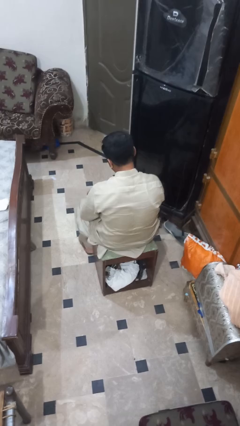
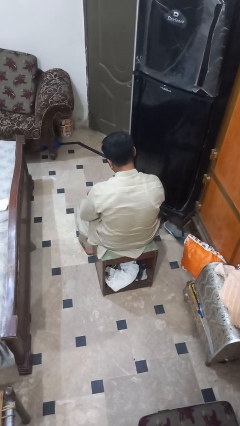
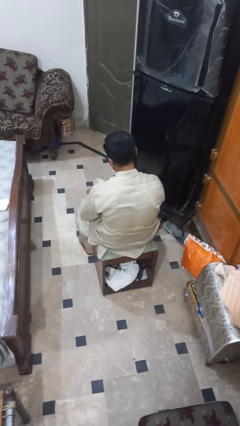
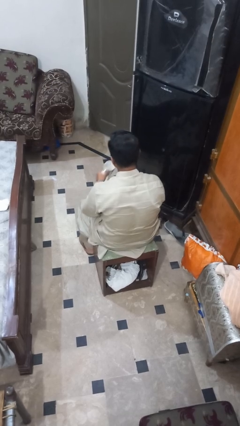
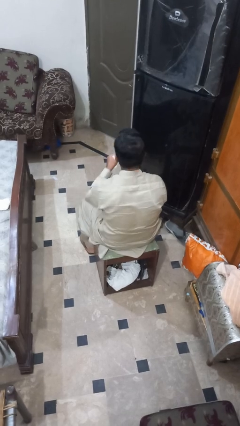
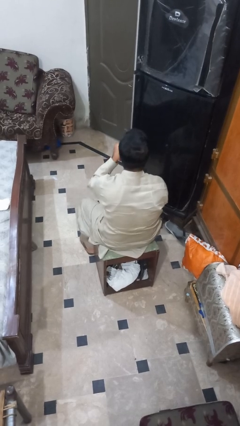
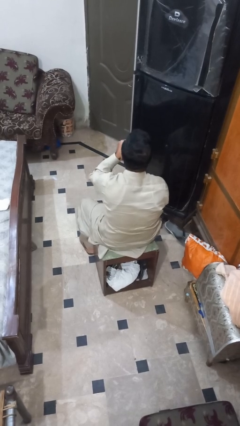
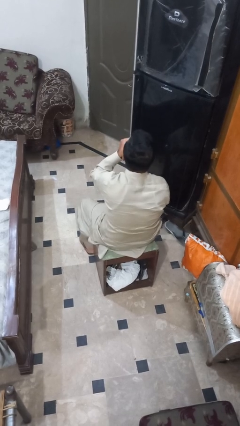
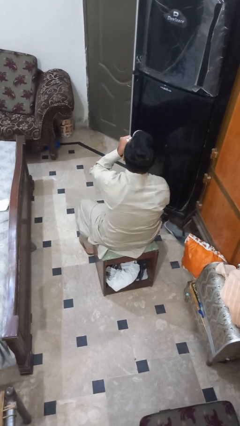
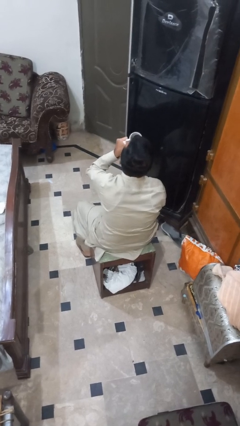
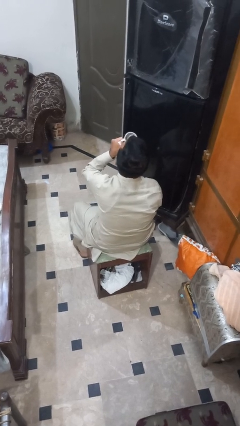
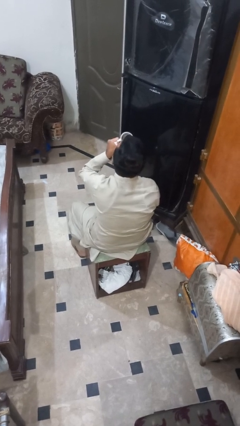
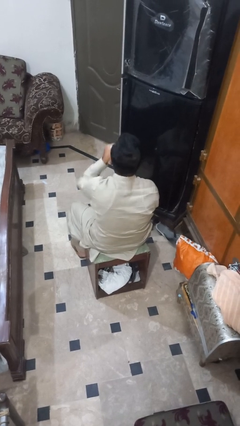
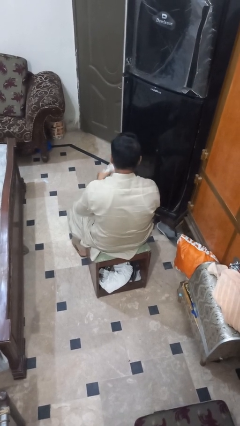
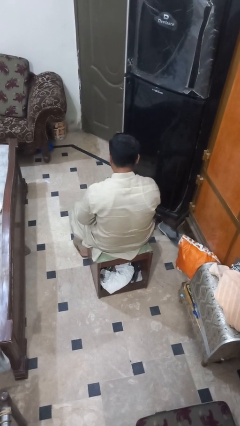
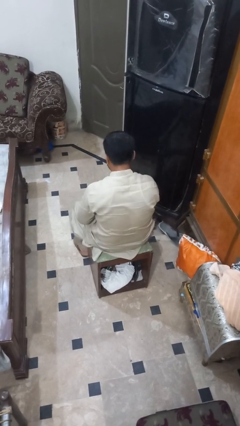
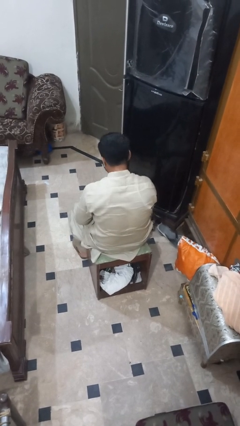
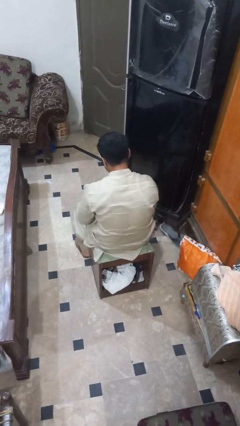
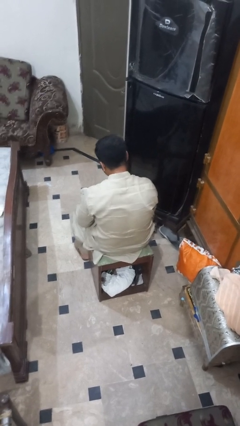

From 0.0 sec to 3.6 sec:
person drinks from mug

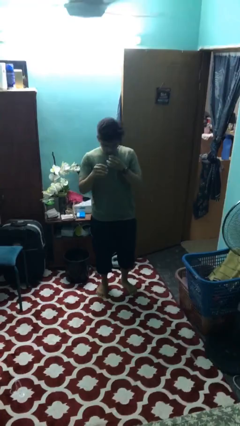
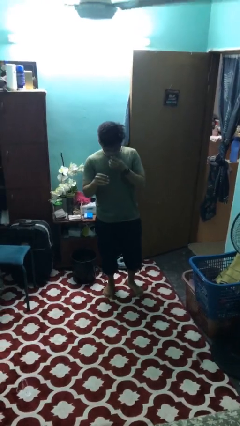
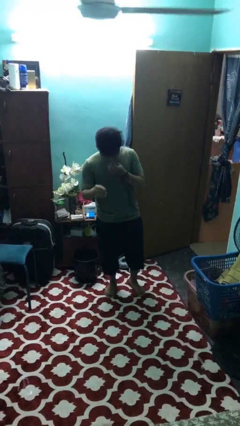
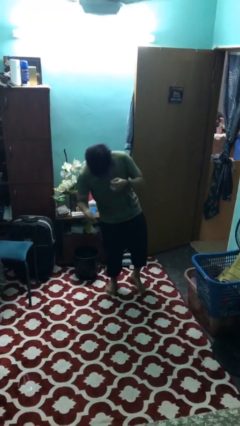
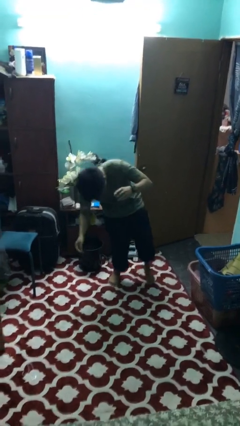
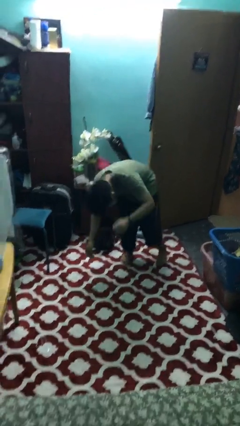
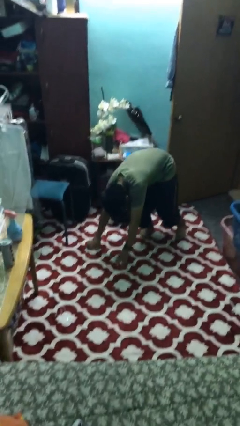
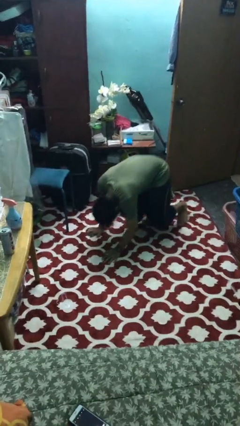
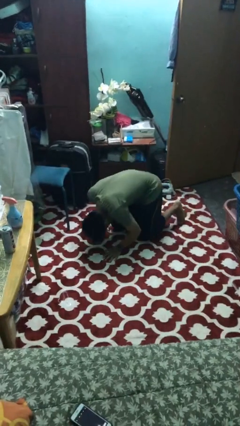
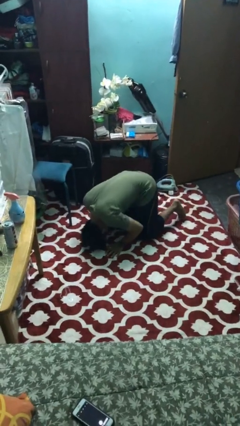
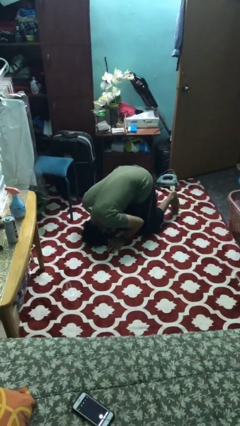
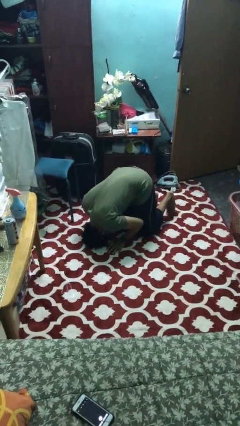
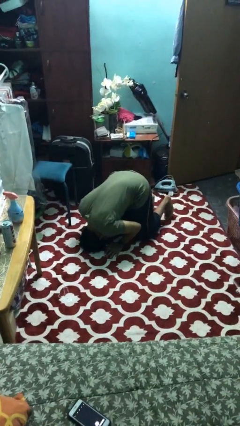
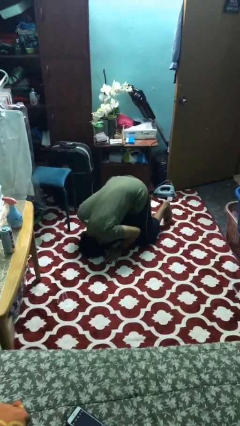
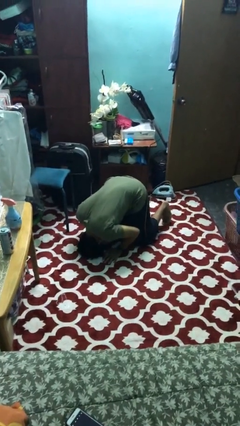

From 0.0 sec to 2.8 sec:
person falls while standing

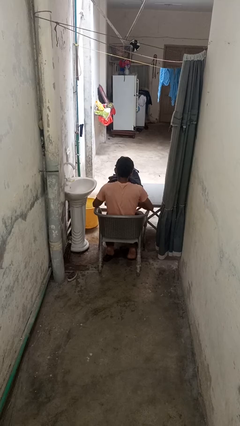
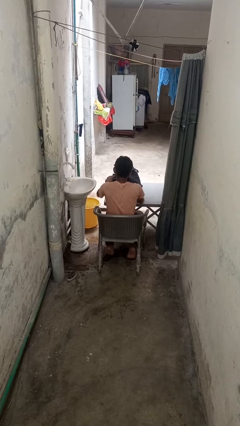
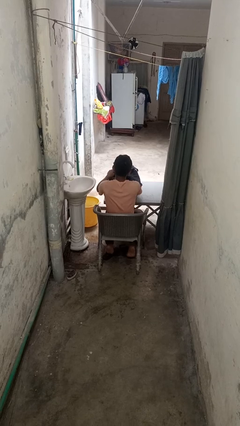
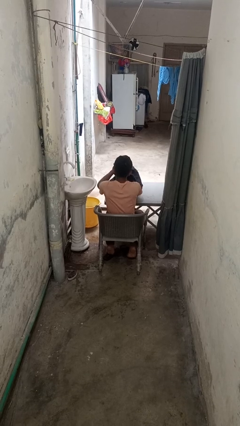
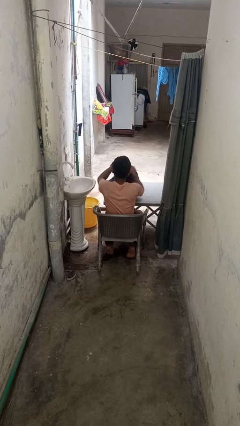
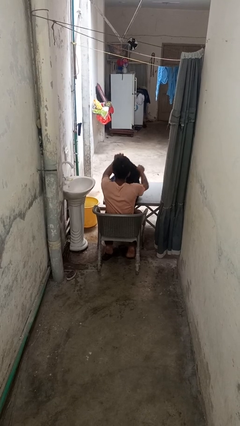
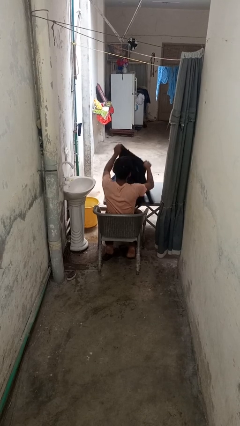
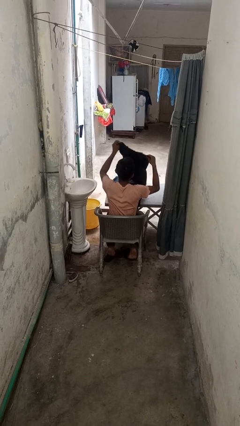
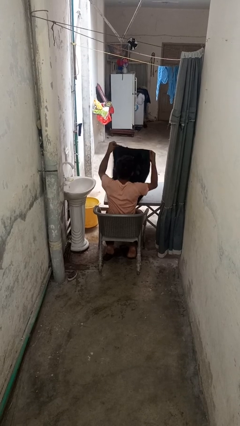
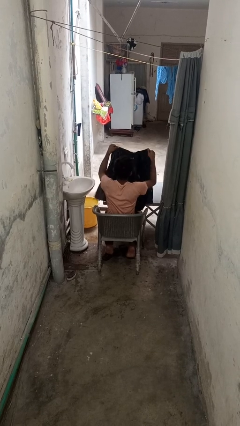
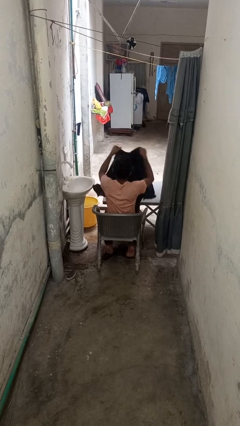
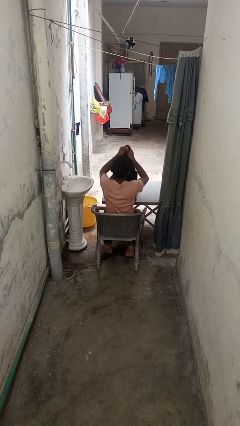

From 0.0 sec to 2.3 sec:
person folds shirt

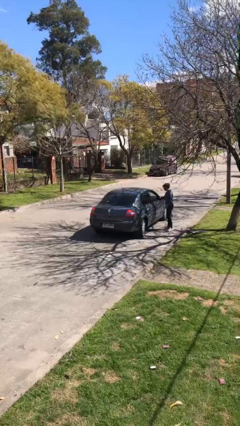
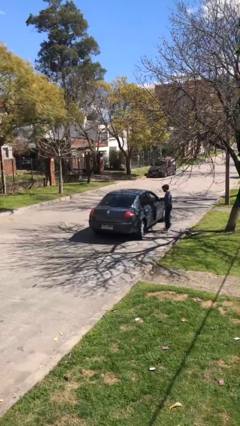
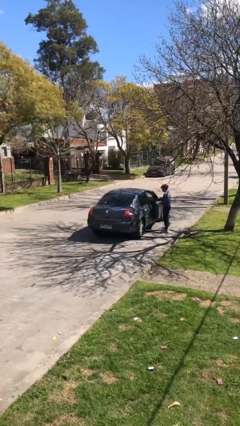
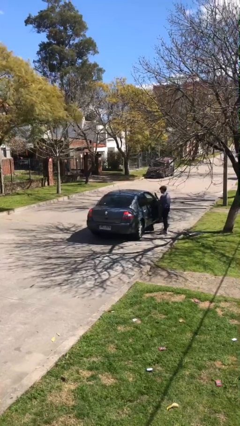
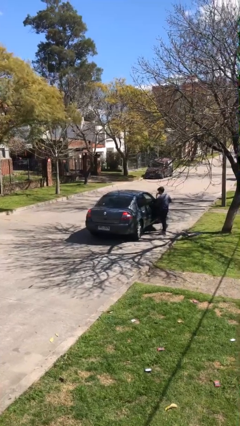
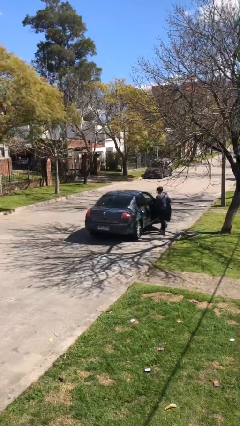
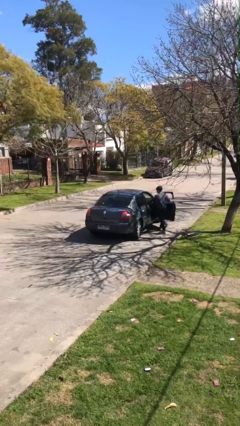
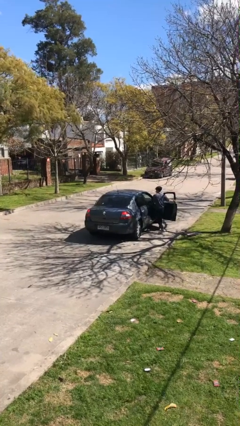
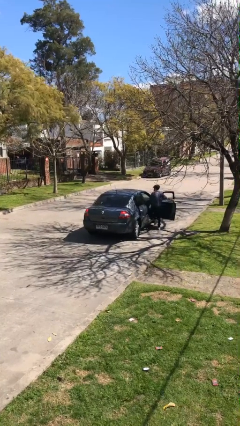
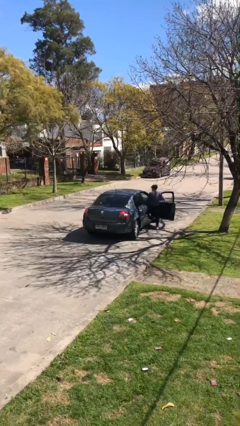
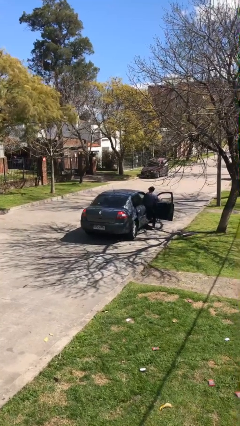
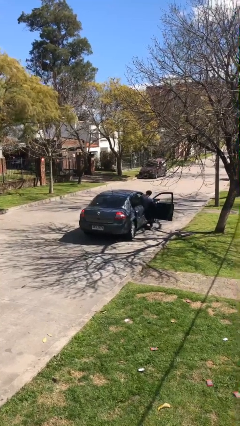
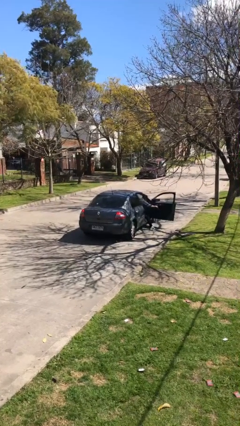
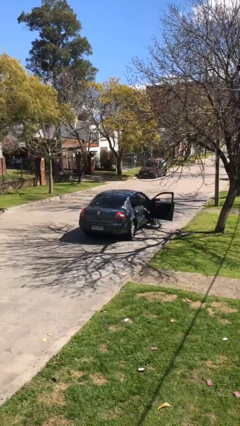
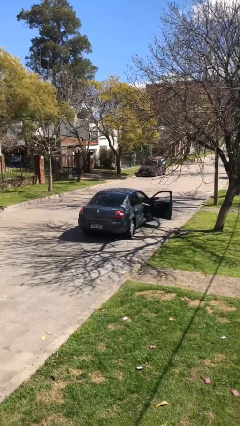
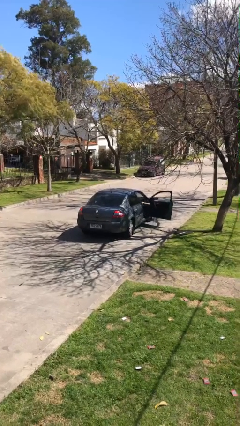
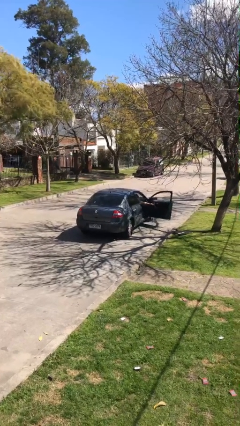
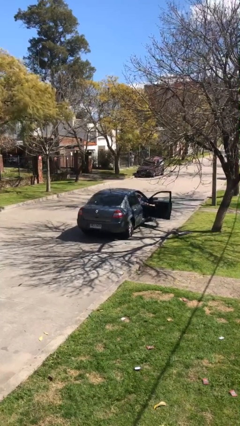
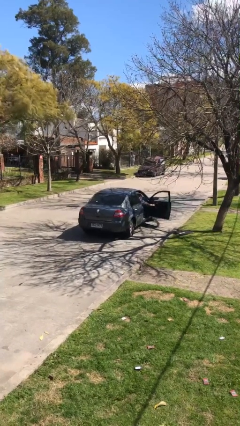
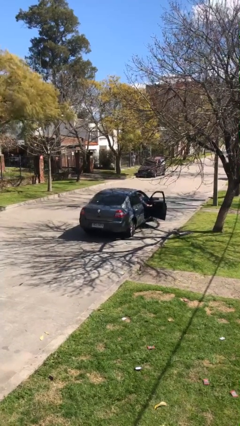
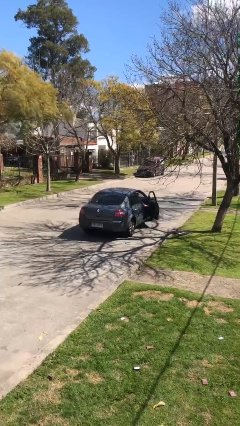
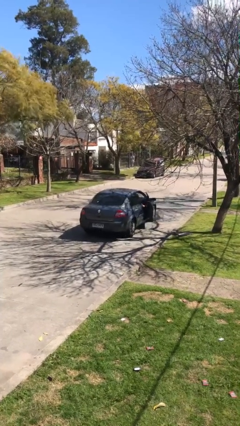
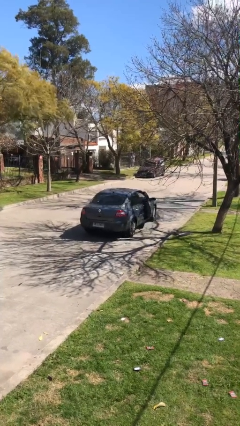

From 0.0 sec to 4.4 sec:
car picks up person

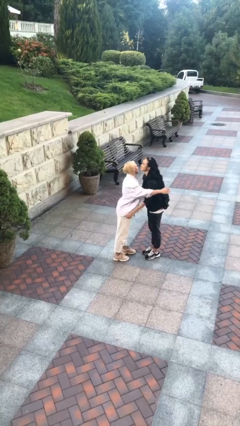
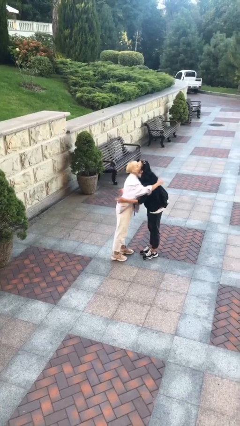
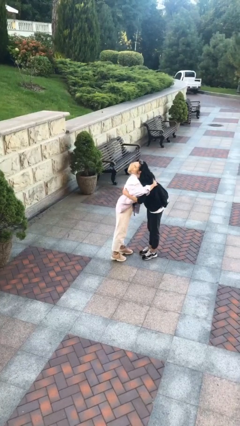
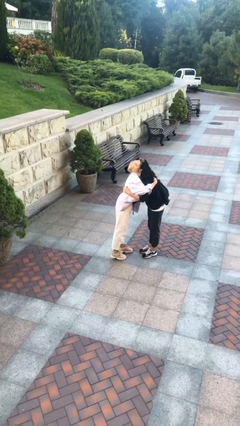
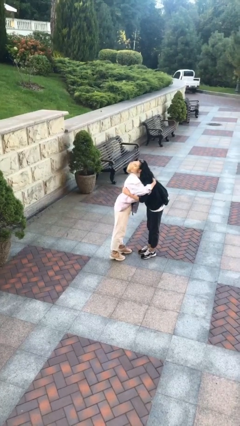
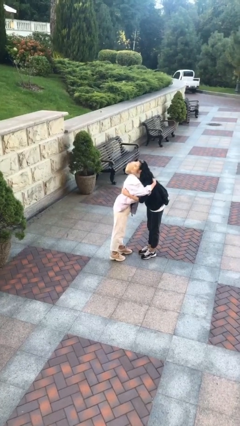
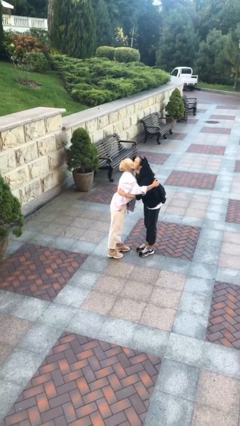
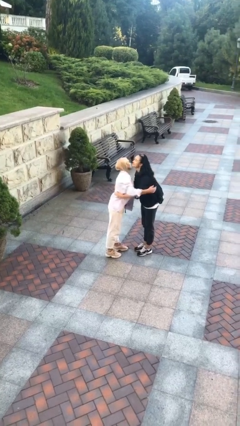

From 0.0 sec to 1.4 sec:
person embraces person

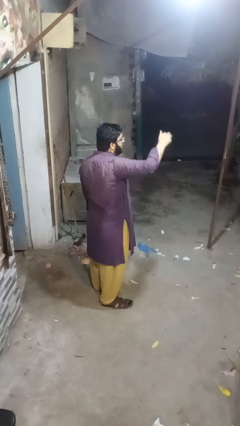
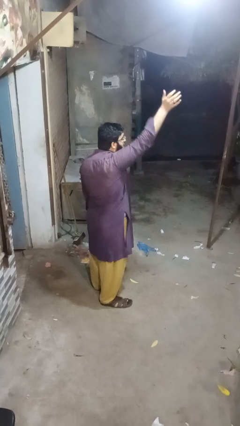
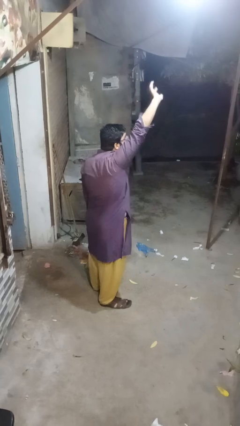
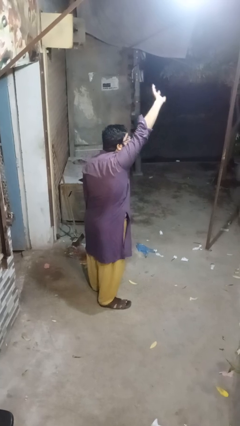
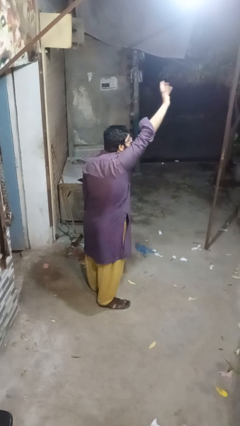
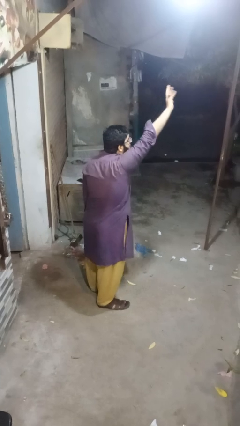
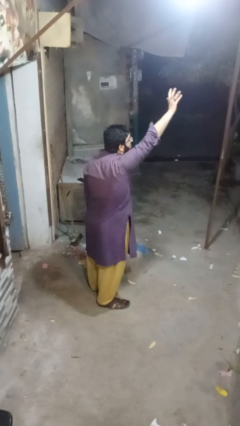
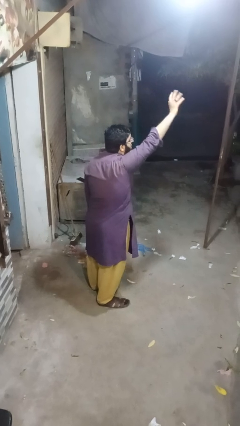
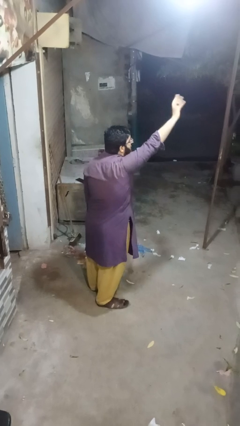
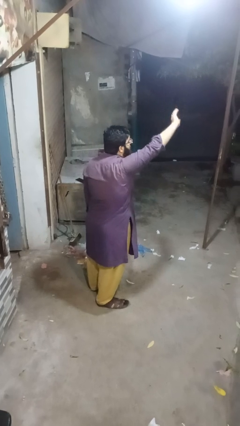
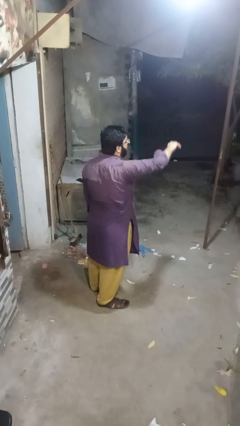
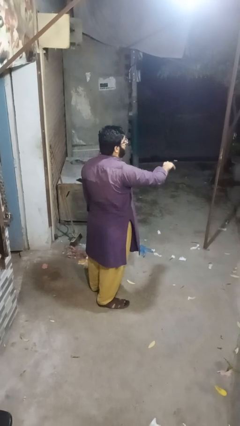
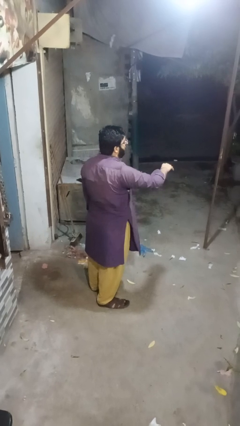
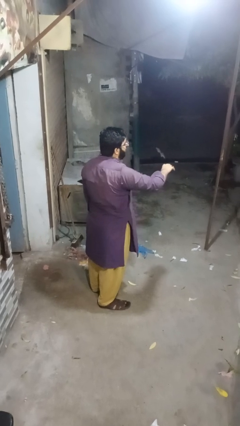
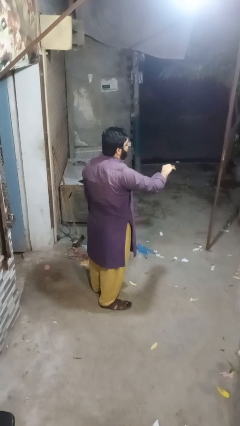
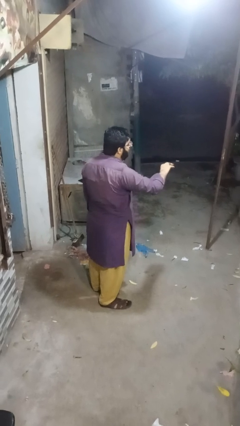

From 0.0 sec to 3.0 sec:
person gestures raise hand
